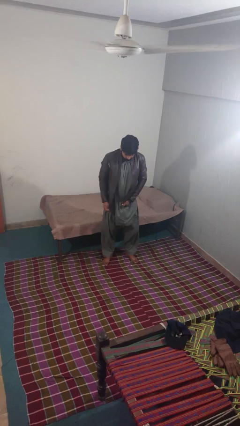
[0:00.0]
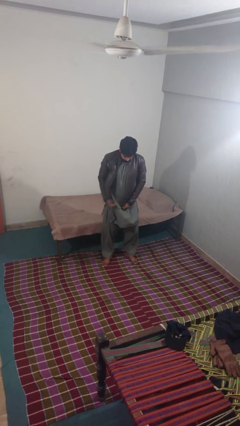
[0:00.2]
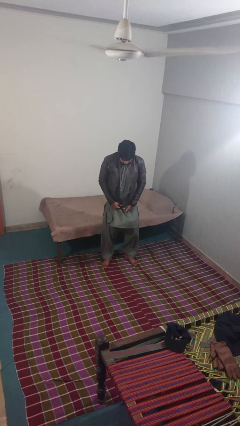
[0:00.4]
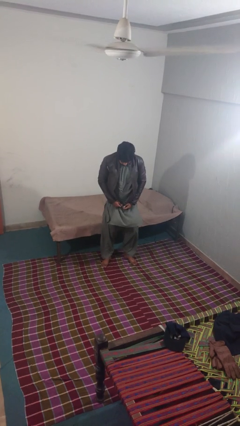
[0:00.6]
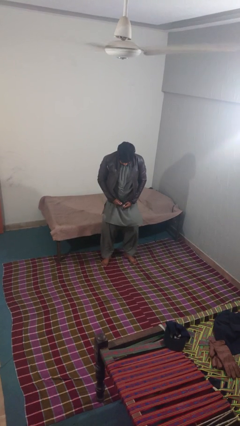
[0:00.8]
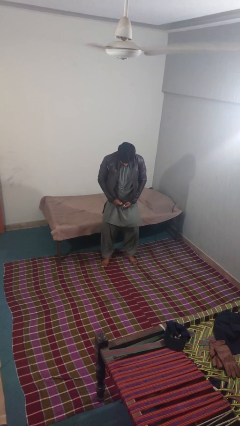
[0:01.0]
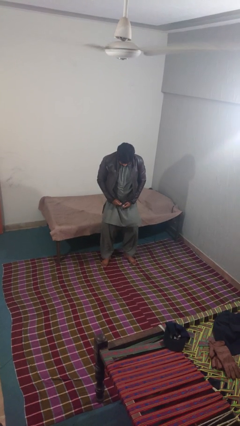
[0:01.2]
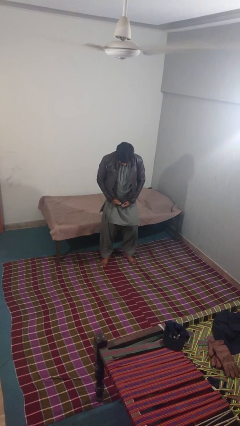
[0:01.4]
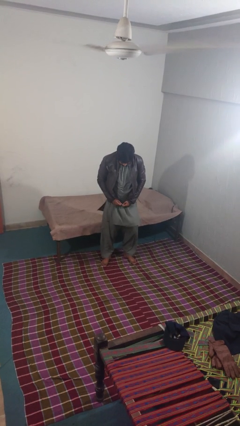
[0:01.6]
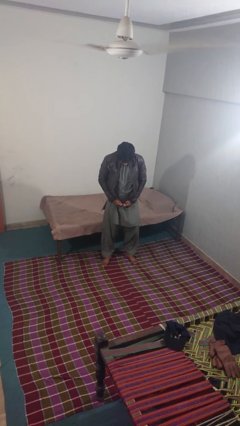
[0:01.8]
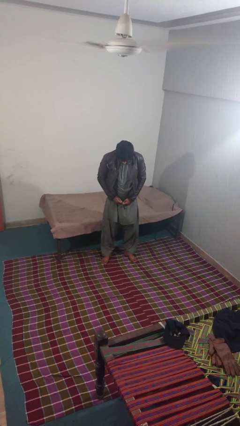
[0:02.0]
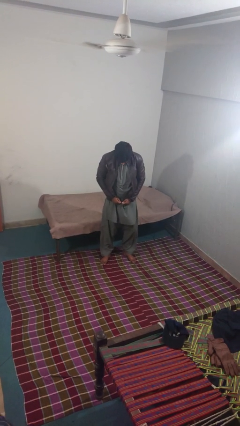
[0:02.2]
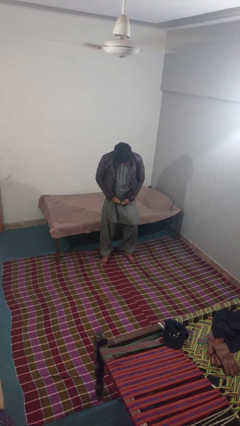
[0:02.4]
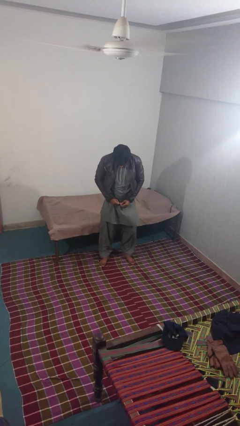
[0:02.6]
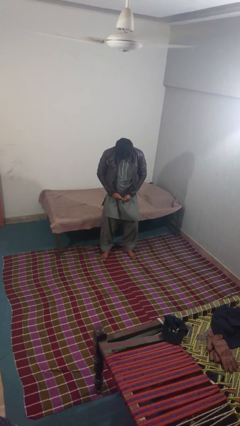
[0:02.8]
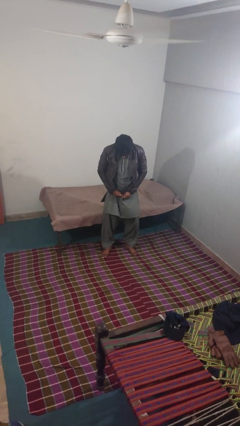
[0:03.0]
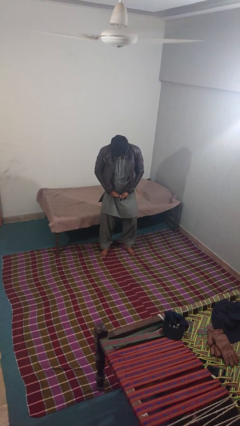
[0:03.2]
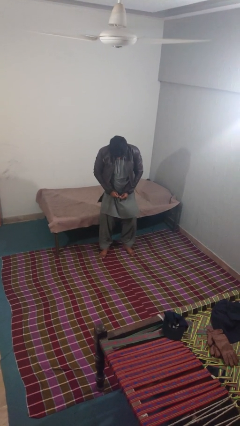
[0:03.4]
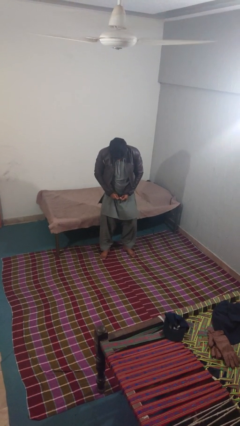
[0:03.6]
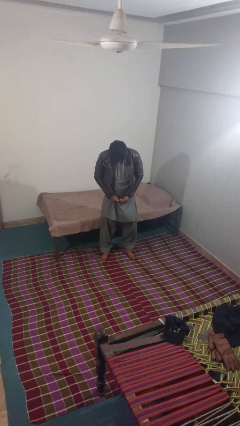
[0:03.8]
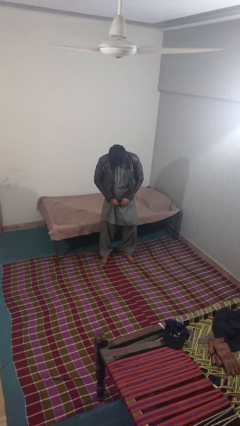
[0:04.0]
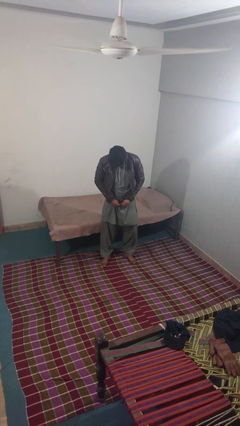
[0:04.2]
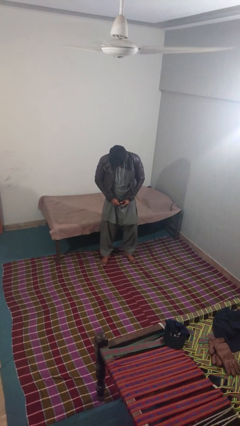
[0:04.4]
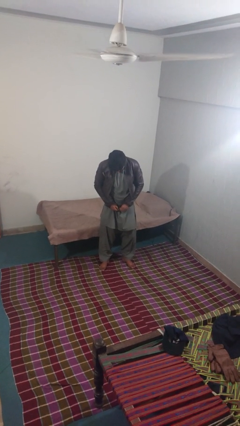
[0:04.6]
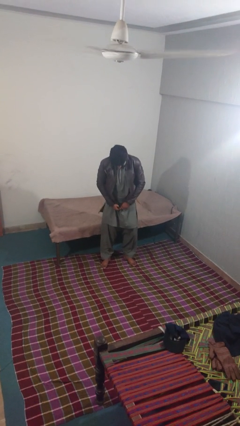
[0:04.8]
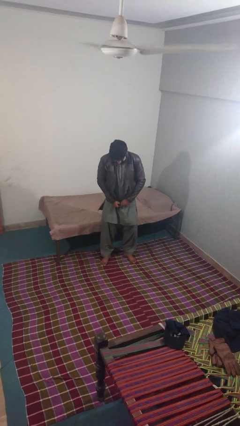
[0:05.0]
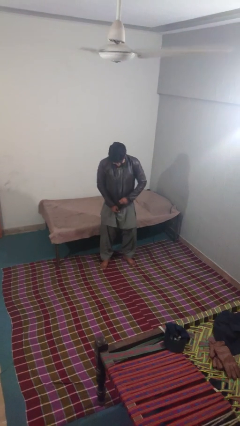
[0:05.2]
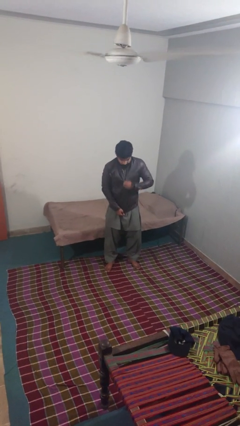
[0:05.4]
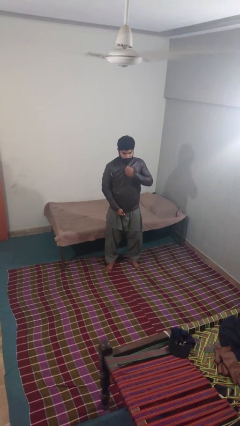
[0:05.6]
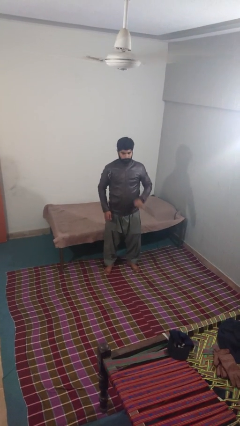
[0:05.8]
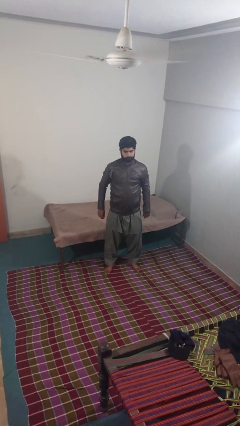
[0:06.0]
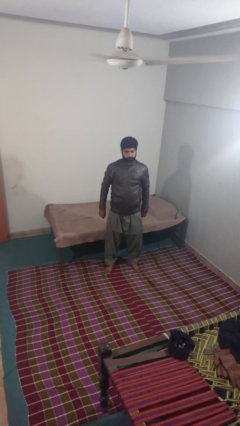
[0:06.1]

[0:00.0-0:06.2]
person zips up jacket

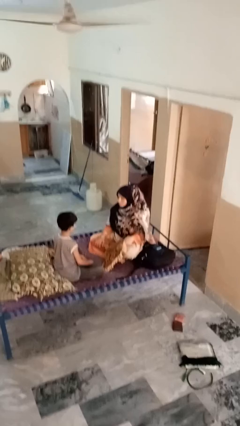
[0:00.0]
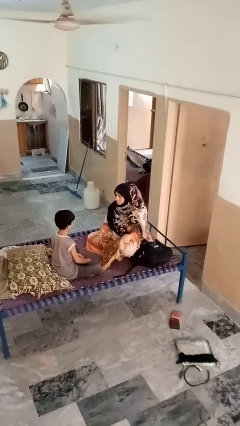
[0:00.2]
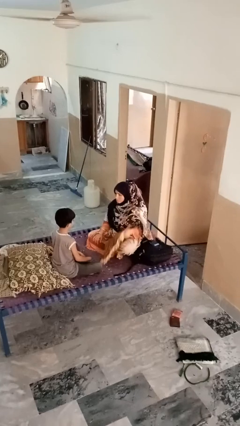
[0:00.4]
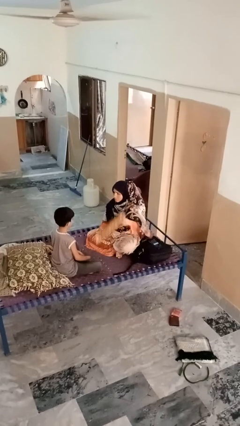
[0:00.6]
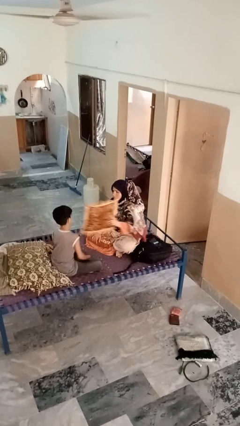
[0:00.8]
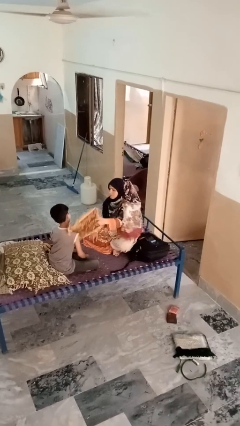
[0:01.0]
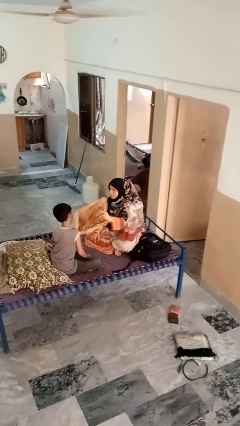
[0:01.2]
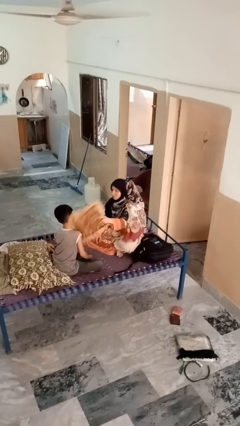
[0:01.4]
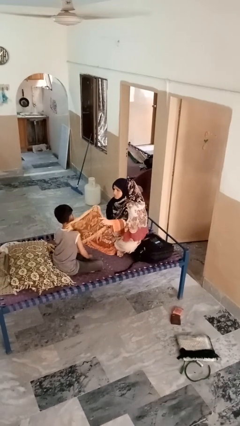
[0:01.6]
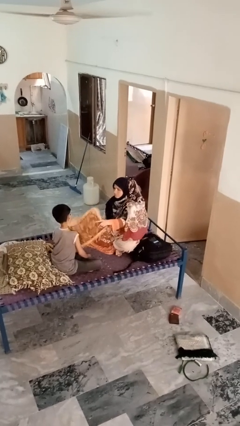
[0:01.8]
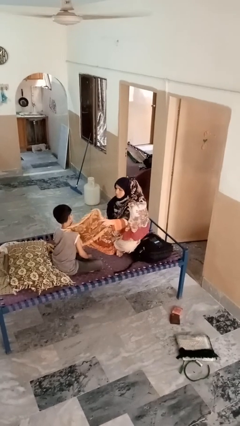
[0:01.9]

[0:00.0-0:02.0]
person hits person with pillow

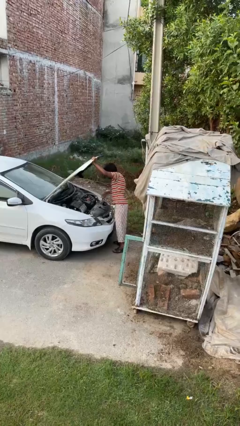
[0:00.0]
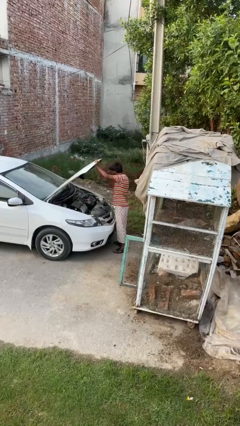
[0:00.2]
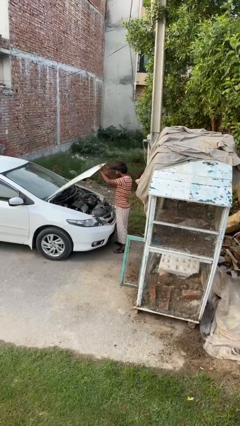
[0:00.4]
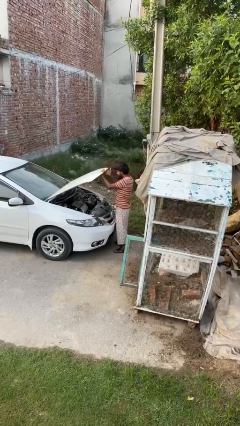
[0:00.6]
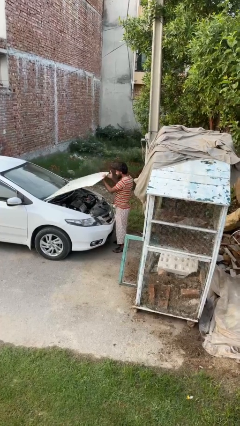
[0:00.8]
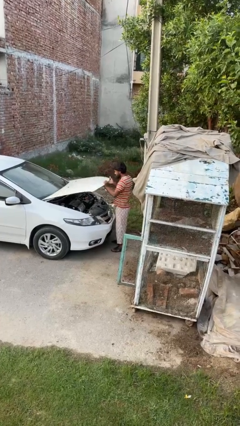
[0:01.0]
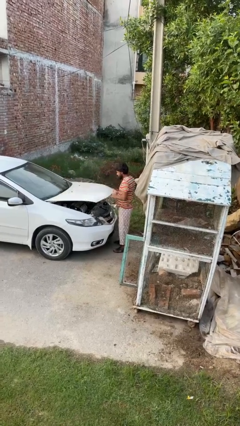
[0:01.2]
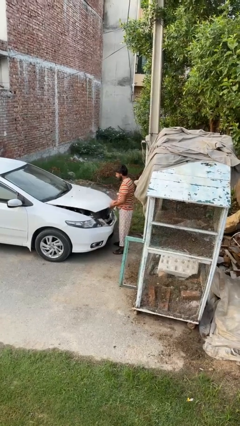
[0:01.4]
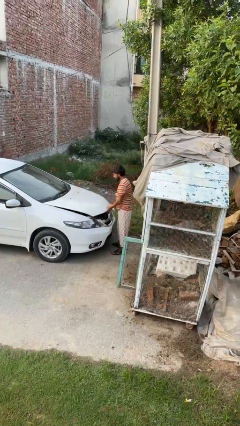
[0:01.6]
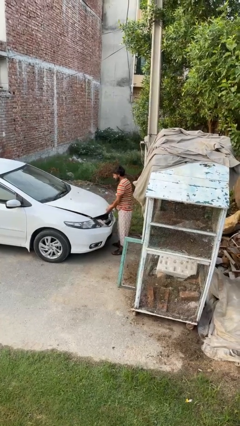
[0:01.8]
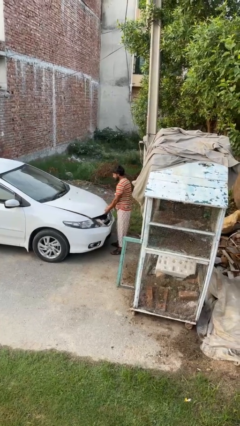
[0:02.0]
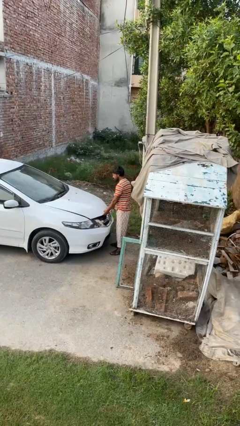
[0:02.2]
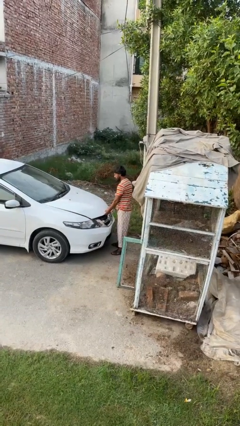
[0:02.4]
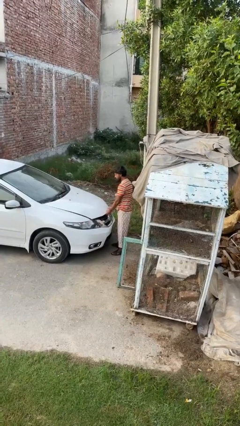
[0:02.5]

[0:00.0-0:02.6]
person closes car hood

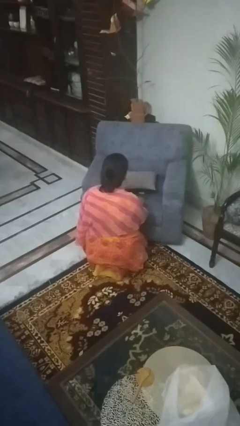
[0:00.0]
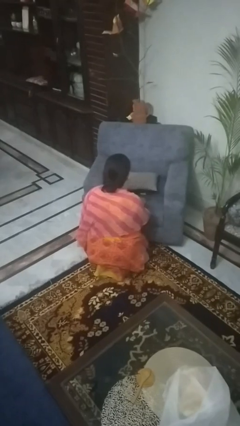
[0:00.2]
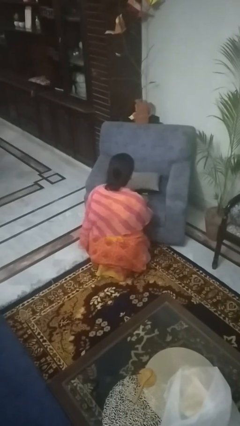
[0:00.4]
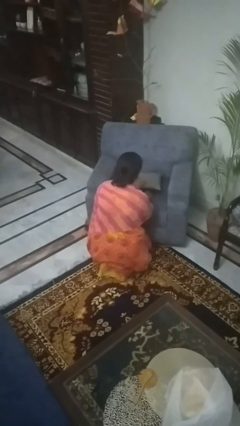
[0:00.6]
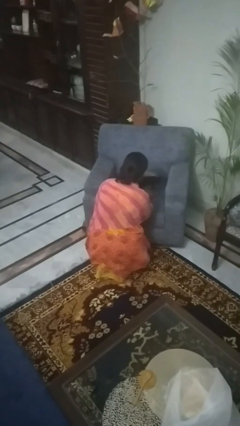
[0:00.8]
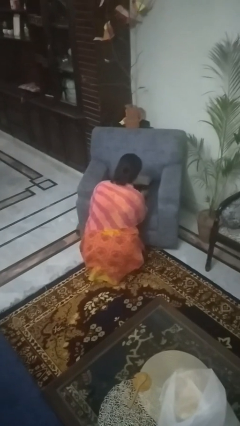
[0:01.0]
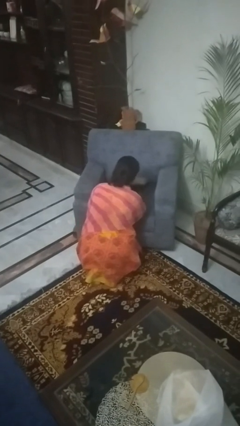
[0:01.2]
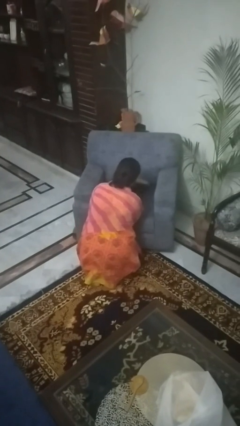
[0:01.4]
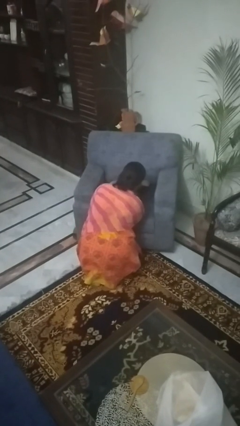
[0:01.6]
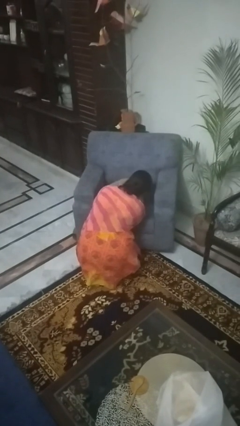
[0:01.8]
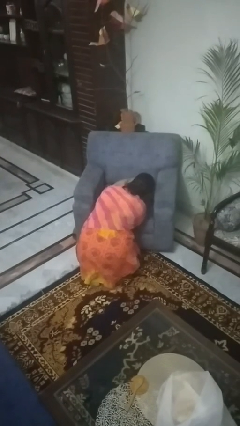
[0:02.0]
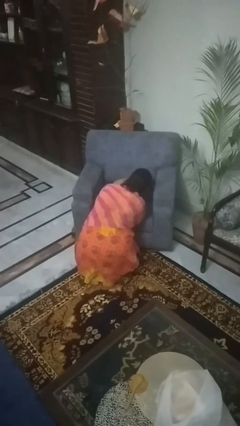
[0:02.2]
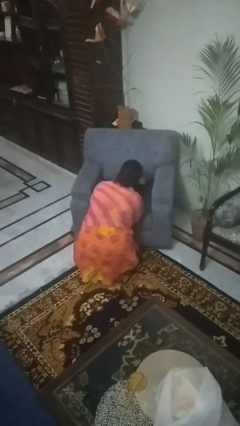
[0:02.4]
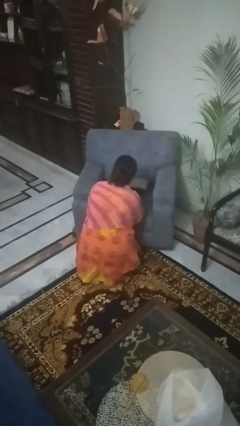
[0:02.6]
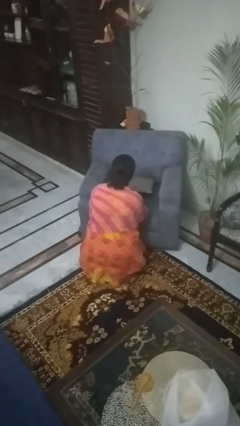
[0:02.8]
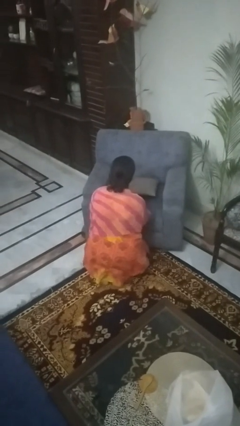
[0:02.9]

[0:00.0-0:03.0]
person searches in couch

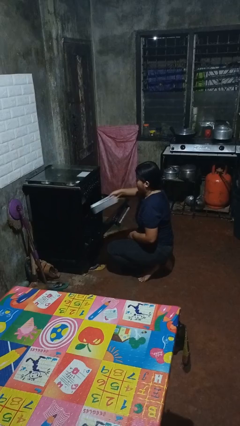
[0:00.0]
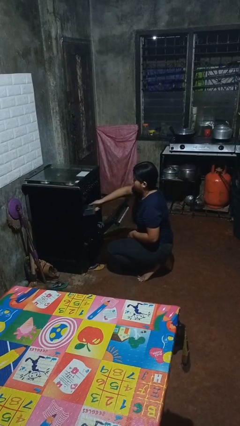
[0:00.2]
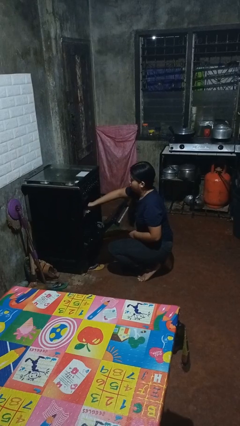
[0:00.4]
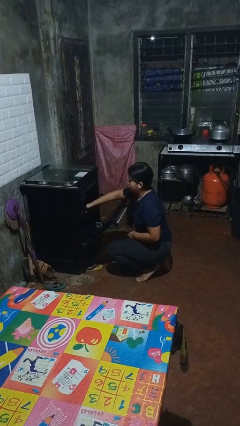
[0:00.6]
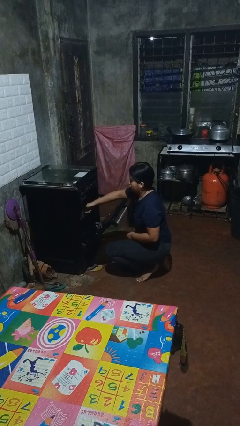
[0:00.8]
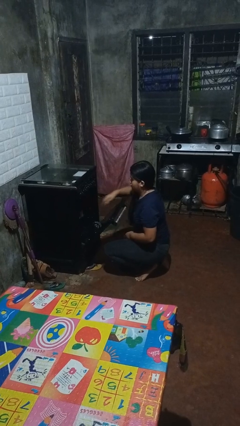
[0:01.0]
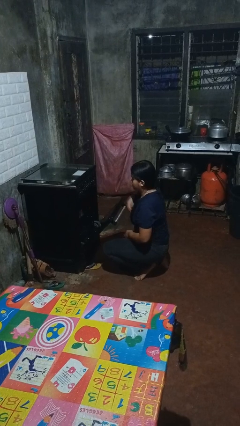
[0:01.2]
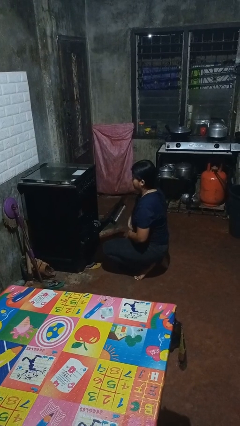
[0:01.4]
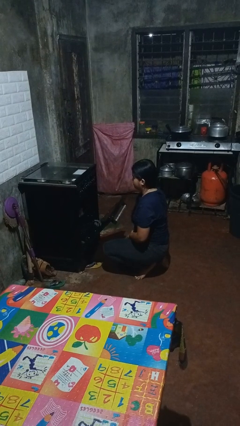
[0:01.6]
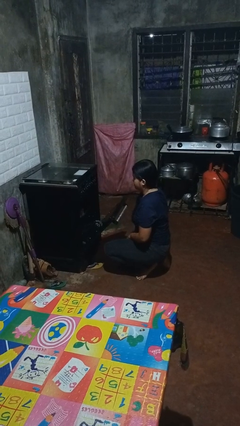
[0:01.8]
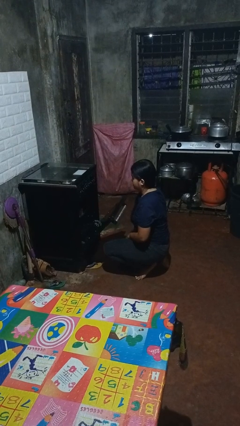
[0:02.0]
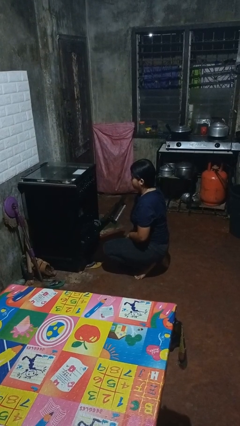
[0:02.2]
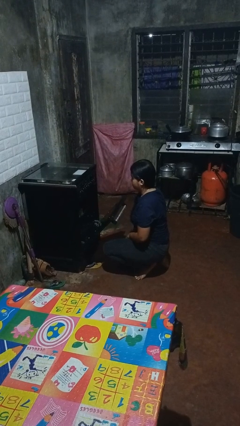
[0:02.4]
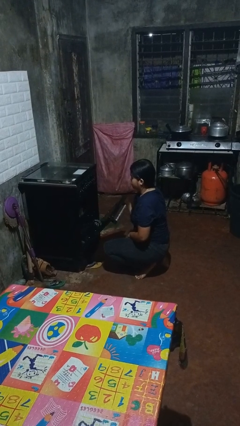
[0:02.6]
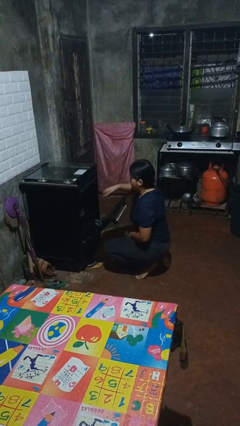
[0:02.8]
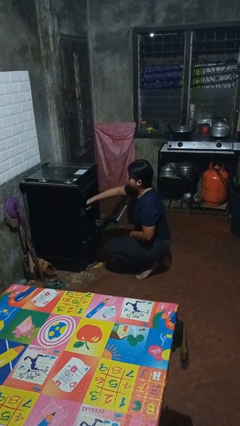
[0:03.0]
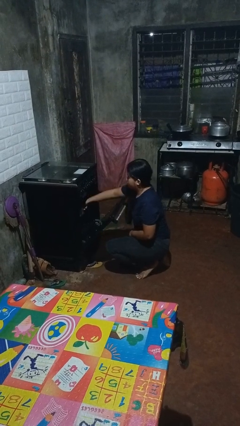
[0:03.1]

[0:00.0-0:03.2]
person puts object into oven

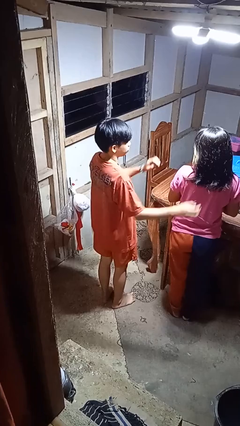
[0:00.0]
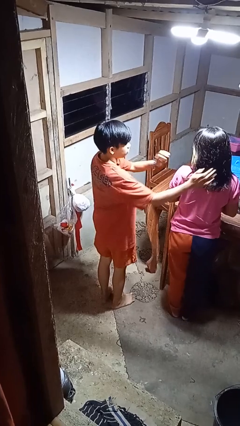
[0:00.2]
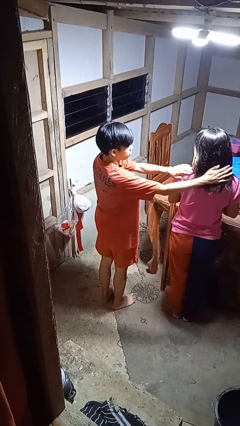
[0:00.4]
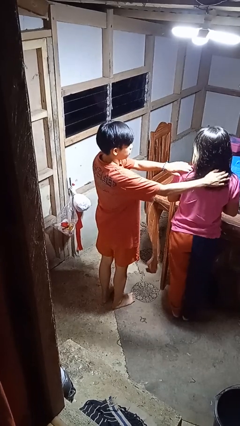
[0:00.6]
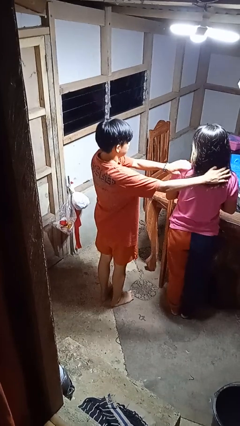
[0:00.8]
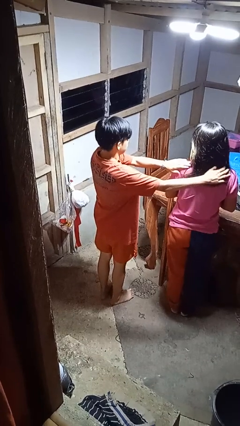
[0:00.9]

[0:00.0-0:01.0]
person pounds shoulders of person
